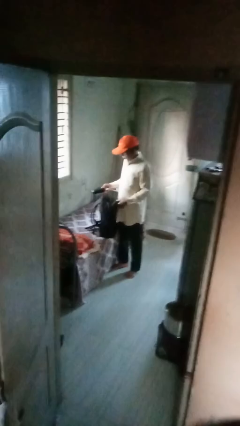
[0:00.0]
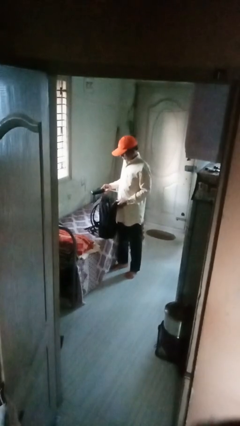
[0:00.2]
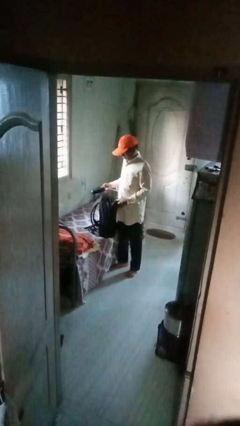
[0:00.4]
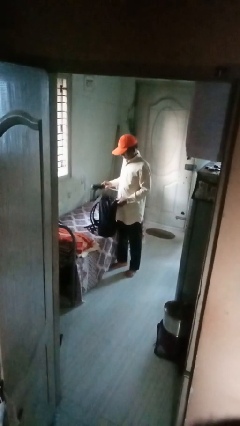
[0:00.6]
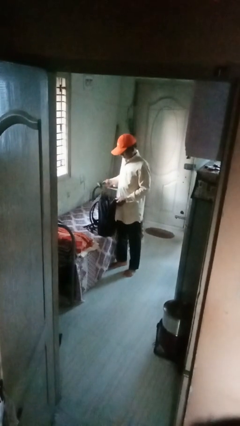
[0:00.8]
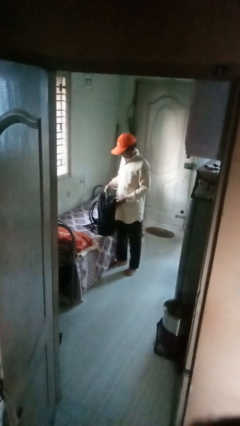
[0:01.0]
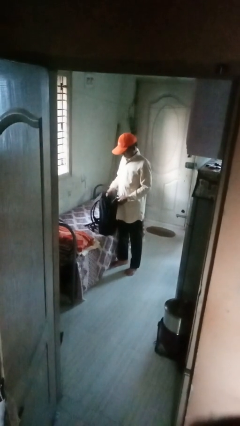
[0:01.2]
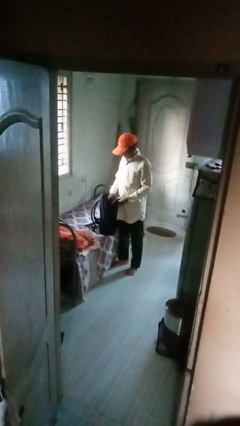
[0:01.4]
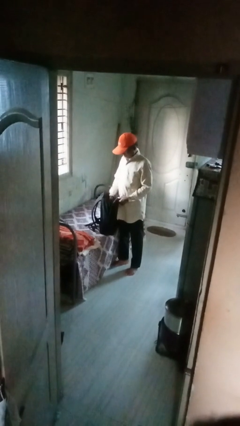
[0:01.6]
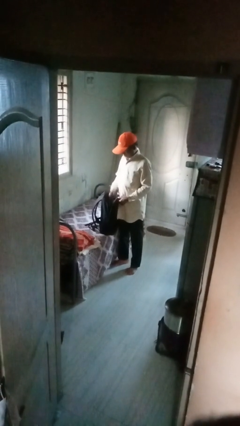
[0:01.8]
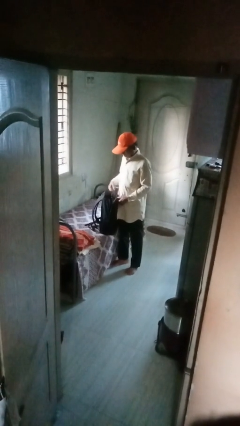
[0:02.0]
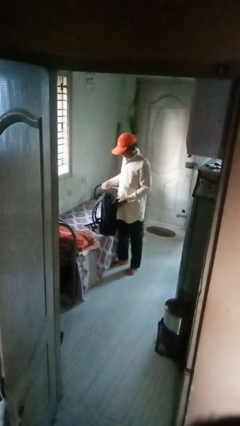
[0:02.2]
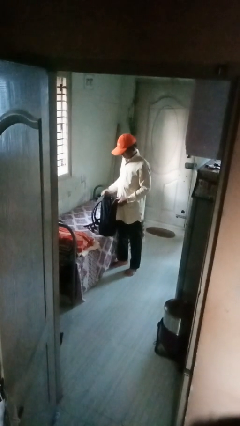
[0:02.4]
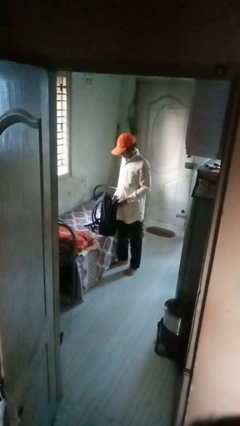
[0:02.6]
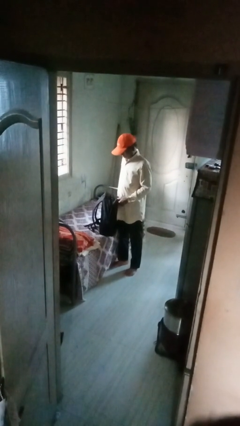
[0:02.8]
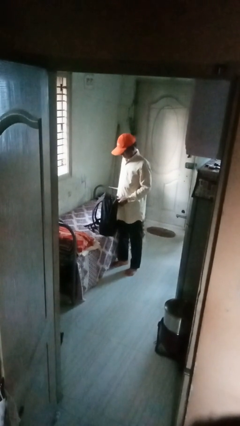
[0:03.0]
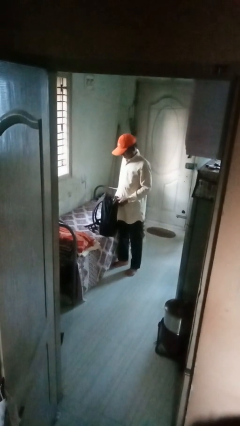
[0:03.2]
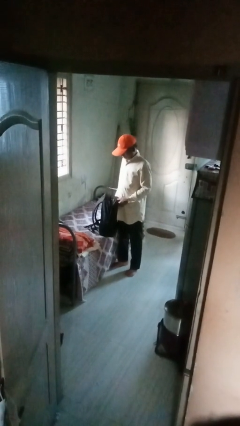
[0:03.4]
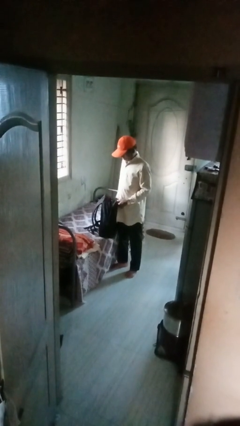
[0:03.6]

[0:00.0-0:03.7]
person puts object into backpack

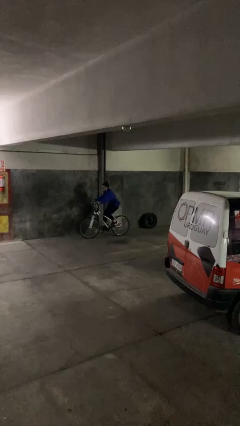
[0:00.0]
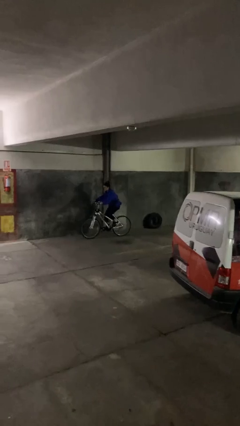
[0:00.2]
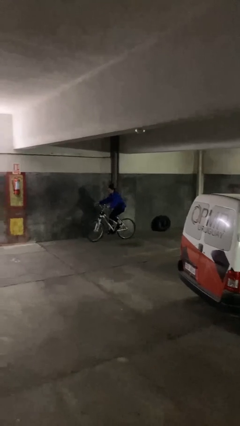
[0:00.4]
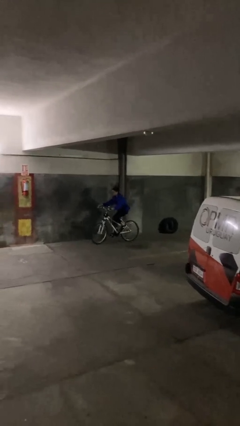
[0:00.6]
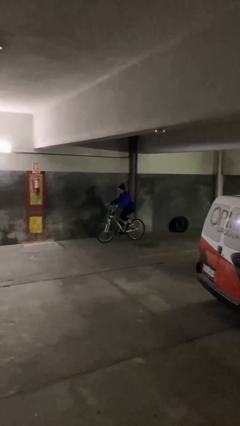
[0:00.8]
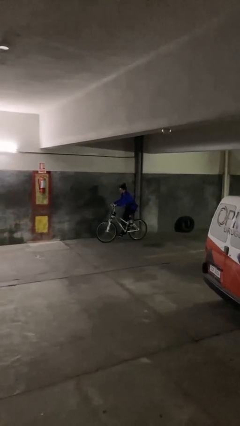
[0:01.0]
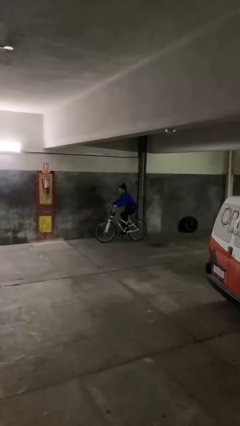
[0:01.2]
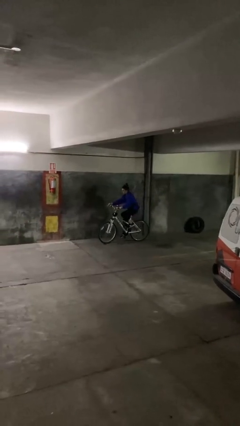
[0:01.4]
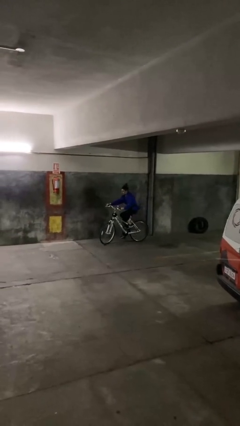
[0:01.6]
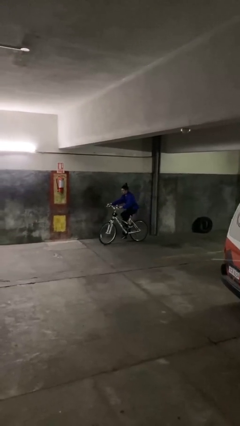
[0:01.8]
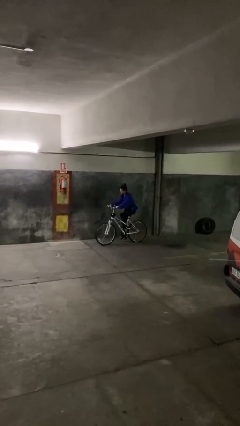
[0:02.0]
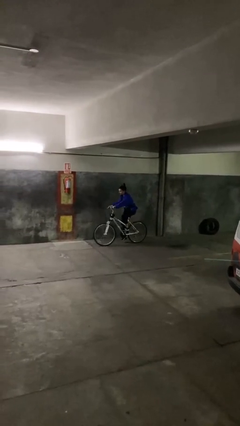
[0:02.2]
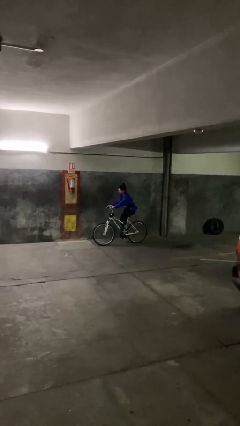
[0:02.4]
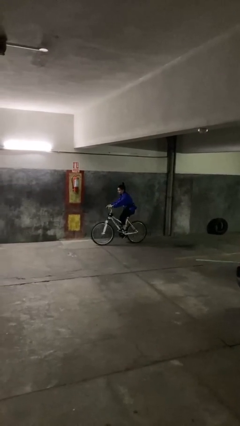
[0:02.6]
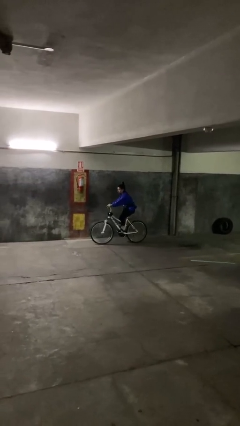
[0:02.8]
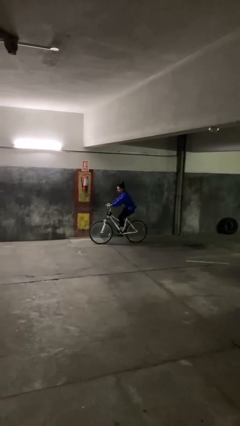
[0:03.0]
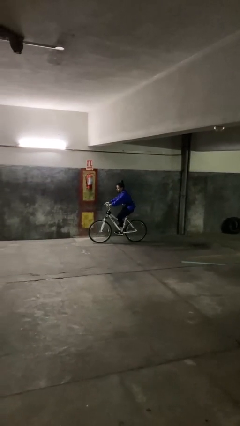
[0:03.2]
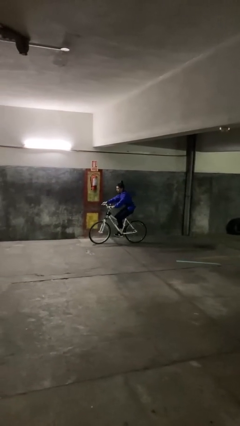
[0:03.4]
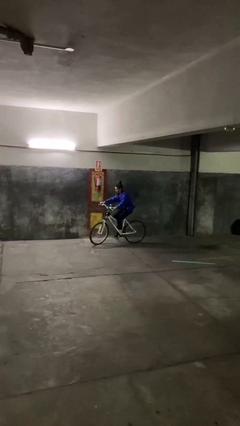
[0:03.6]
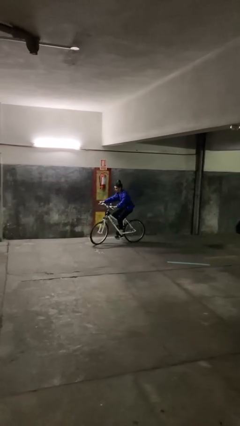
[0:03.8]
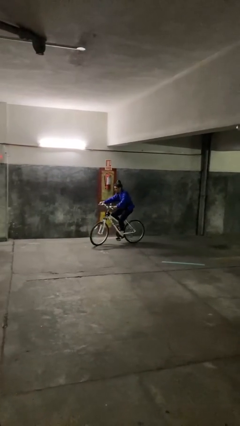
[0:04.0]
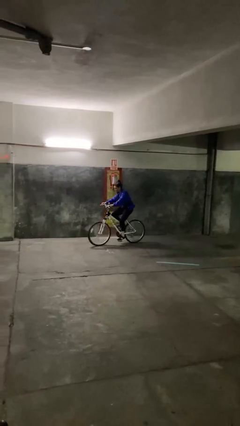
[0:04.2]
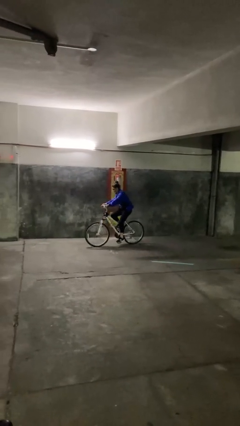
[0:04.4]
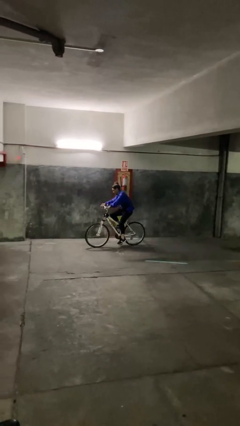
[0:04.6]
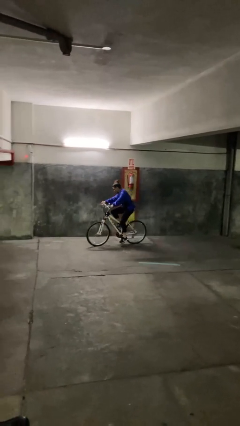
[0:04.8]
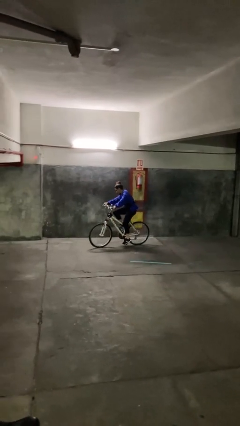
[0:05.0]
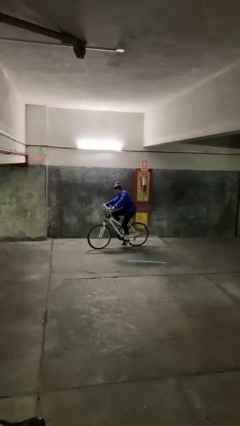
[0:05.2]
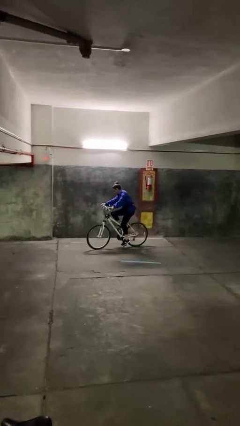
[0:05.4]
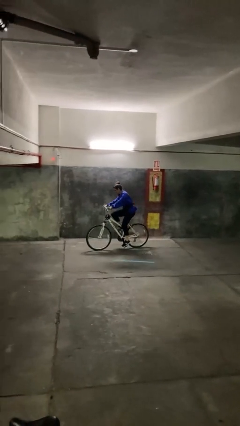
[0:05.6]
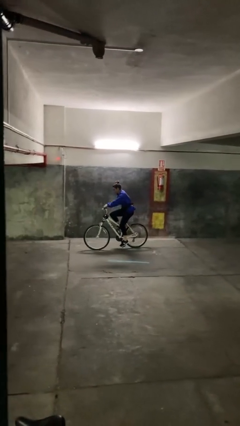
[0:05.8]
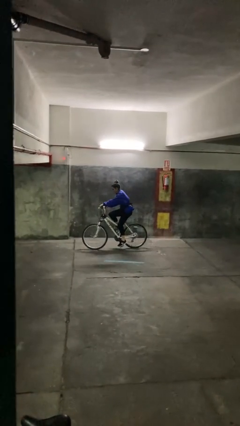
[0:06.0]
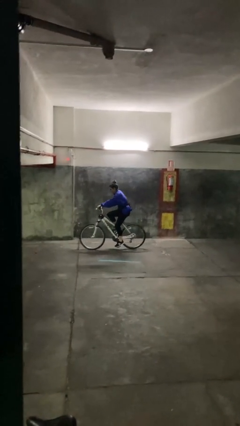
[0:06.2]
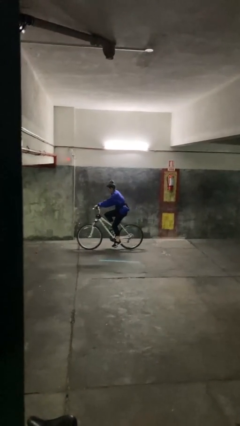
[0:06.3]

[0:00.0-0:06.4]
person rides bicycle

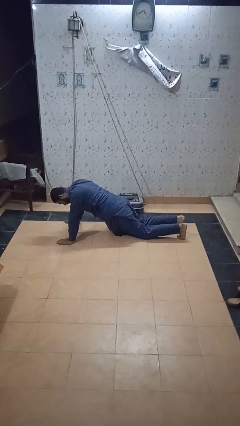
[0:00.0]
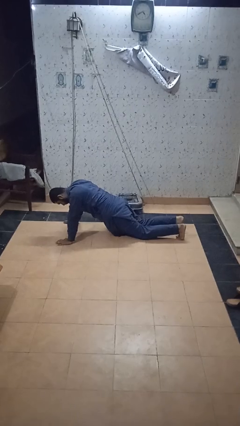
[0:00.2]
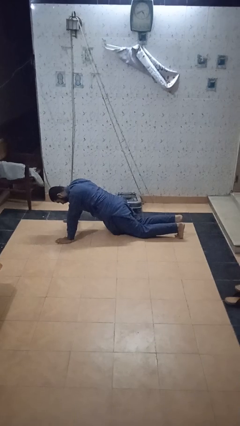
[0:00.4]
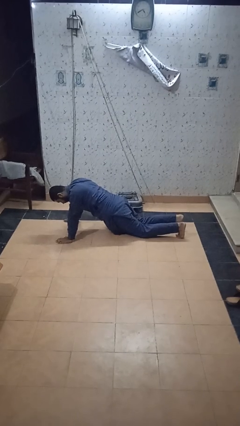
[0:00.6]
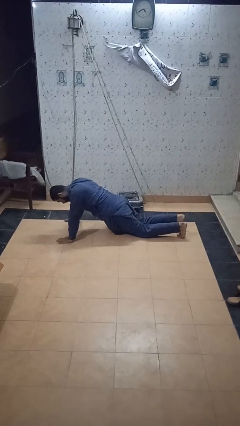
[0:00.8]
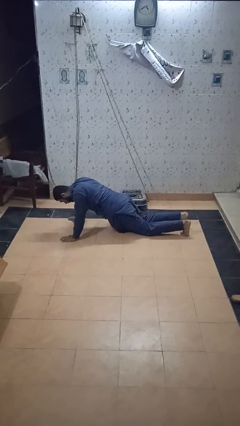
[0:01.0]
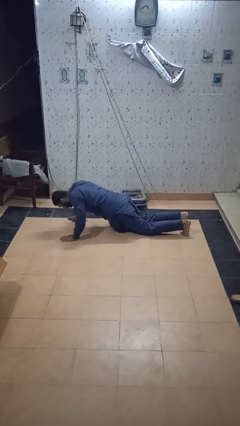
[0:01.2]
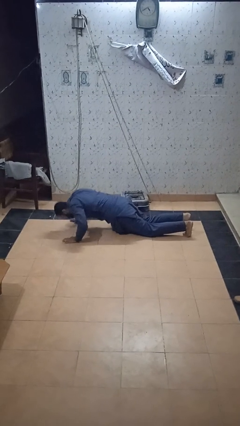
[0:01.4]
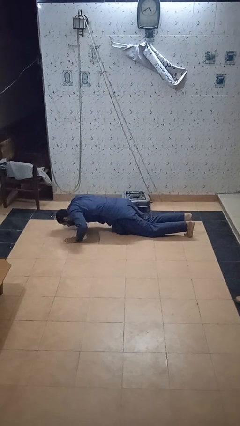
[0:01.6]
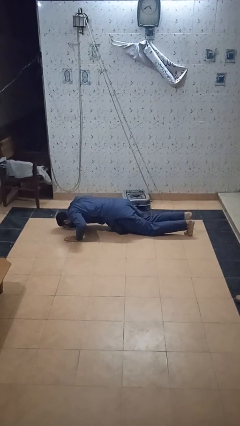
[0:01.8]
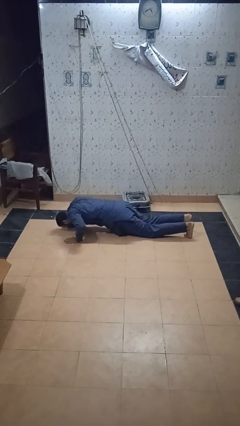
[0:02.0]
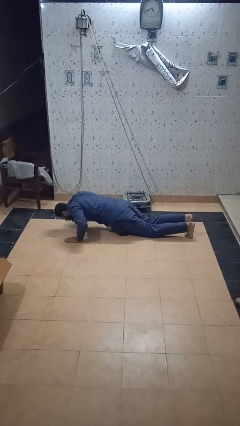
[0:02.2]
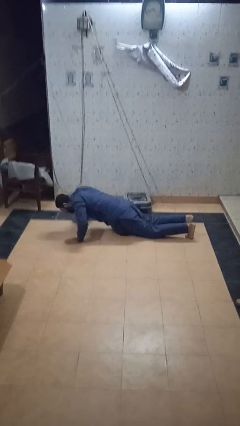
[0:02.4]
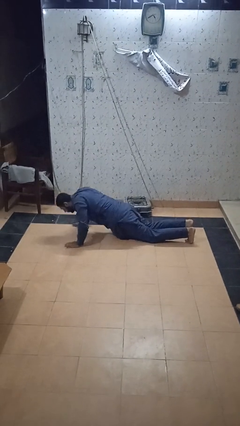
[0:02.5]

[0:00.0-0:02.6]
person exercises with pushup

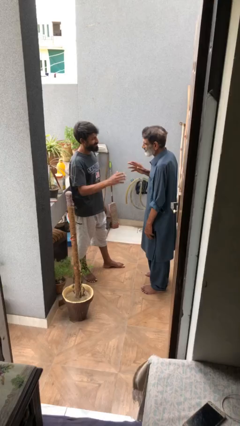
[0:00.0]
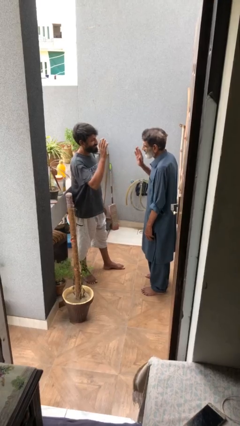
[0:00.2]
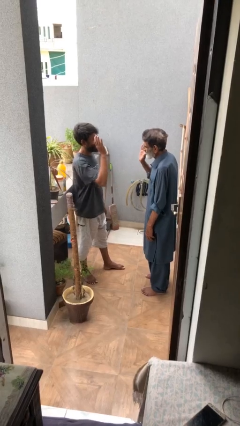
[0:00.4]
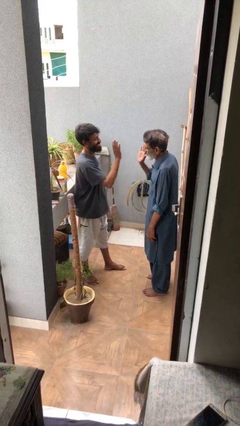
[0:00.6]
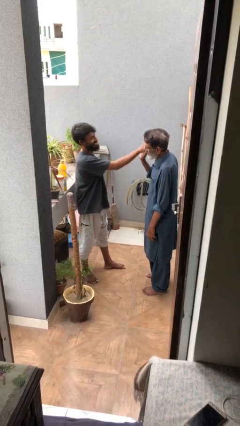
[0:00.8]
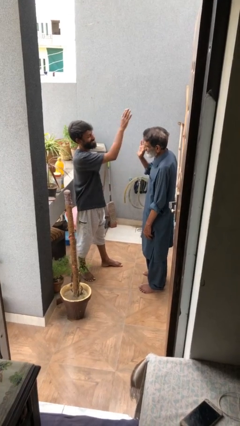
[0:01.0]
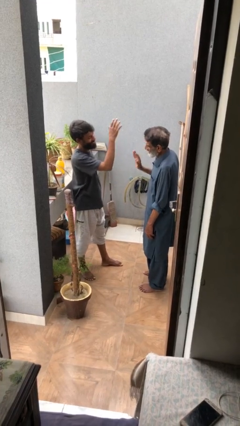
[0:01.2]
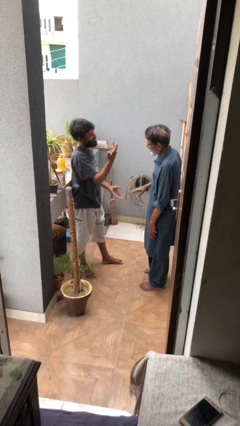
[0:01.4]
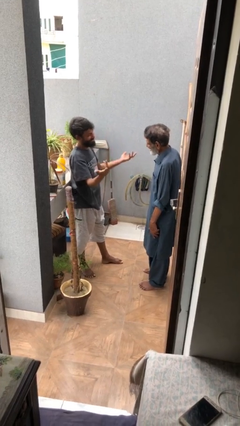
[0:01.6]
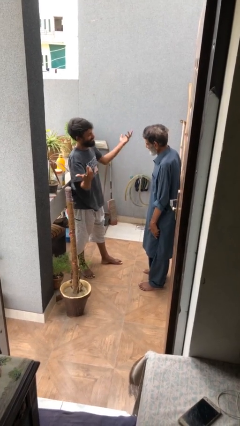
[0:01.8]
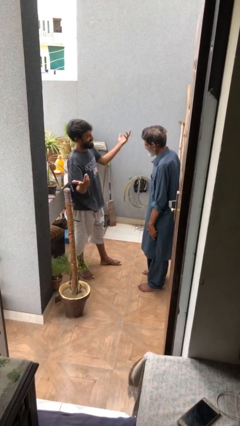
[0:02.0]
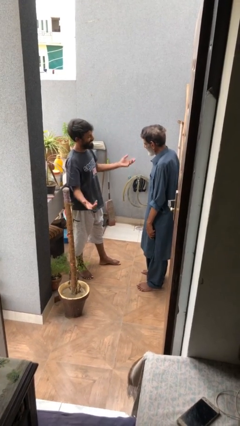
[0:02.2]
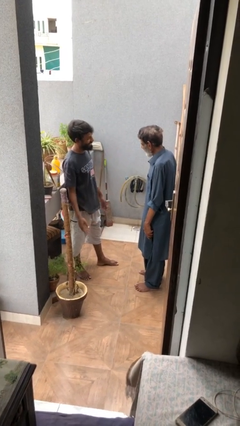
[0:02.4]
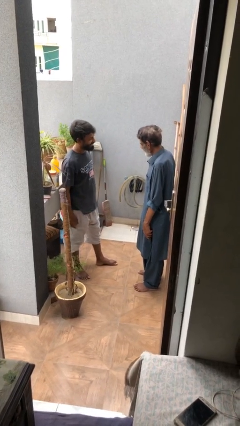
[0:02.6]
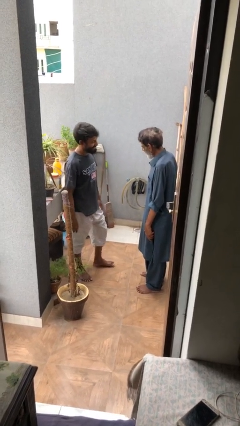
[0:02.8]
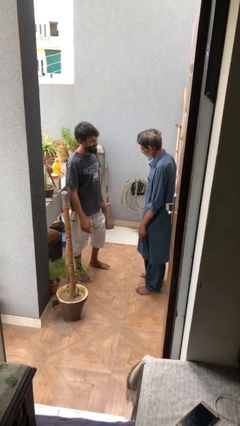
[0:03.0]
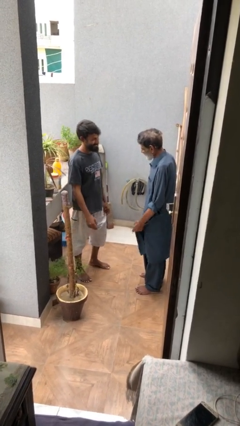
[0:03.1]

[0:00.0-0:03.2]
person highfives hand

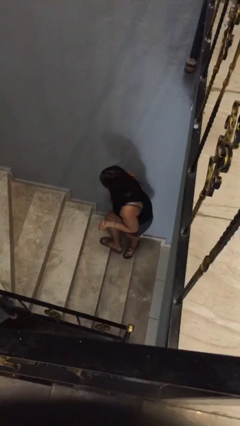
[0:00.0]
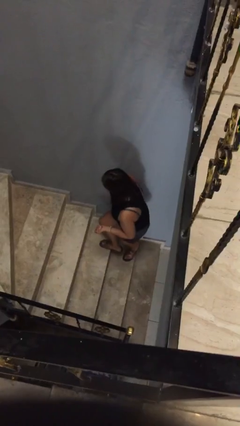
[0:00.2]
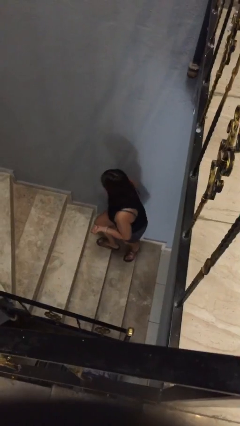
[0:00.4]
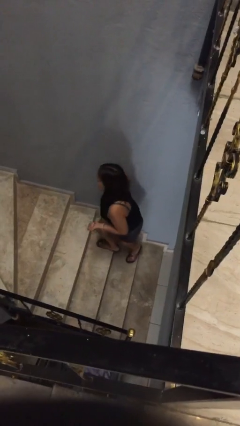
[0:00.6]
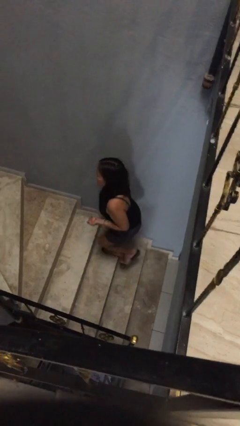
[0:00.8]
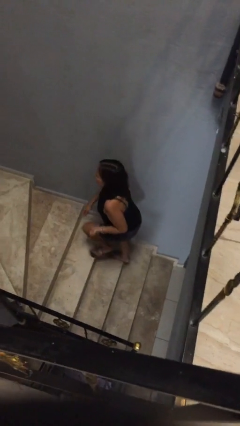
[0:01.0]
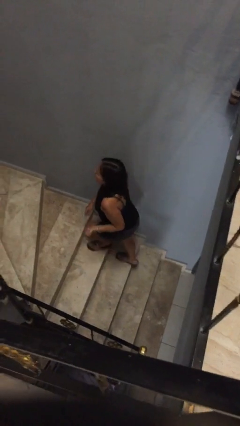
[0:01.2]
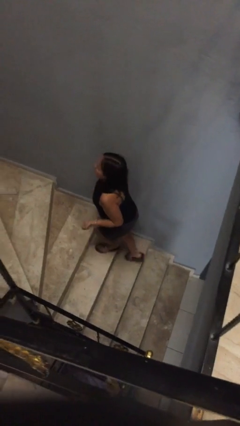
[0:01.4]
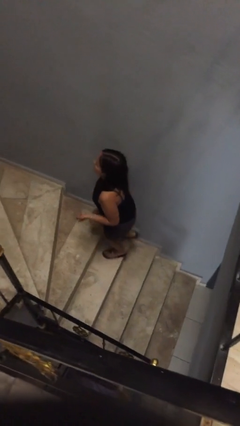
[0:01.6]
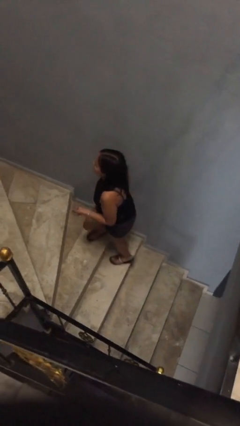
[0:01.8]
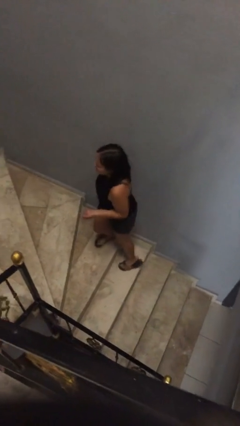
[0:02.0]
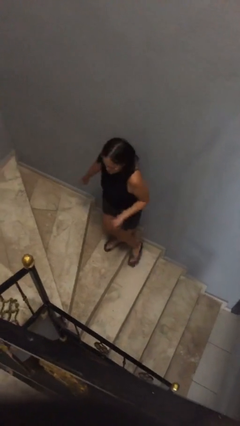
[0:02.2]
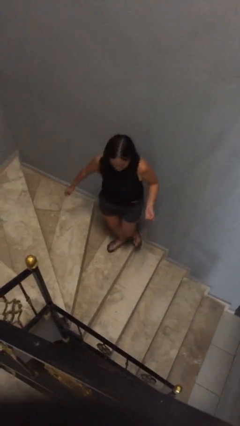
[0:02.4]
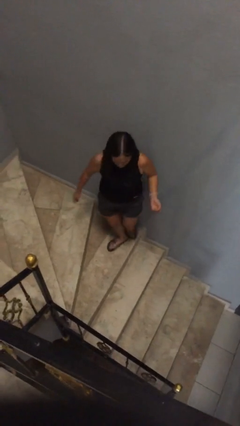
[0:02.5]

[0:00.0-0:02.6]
person climbs up stairs
